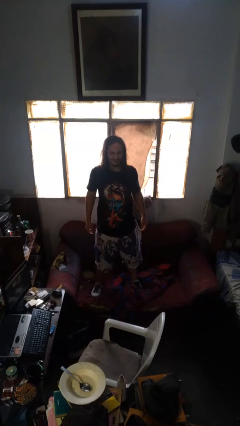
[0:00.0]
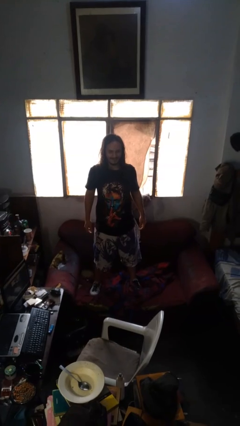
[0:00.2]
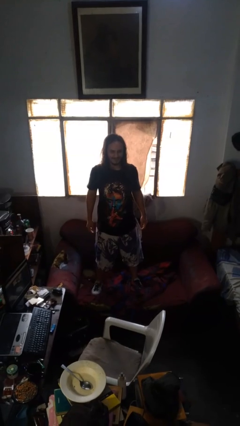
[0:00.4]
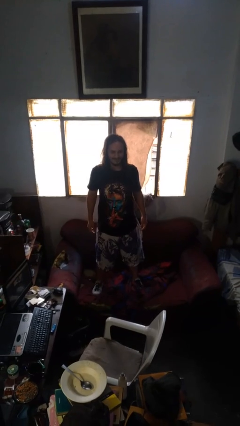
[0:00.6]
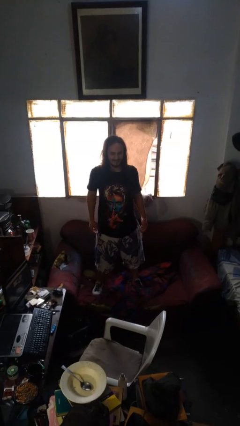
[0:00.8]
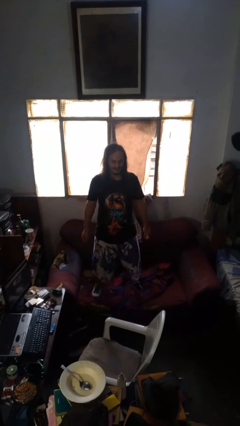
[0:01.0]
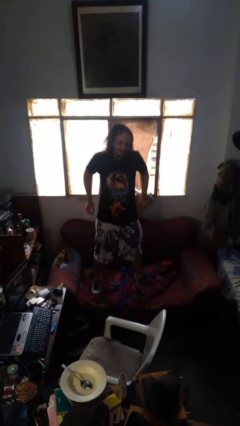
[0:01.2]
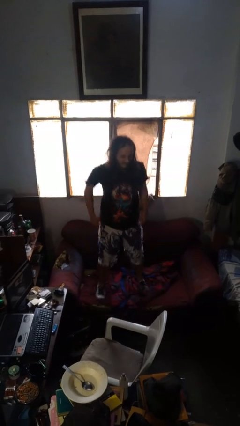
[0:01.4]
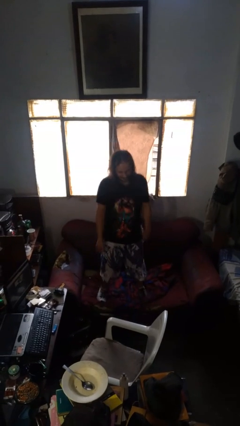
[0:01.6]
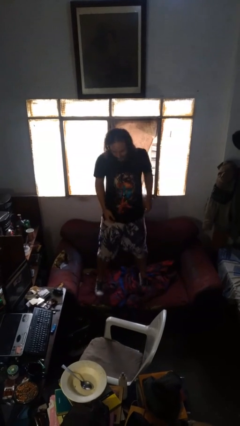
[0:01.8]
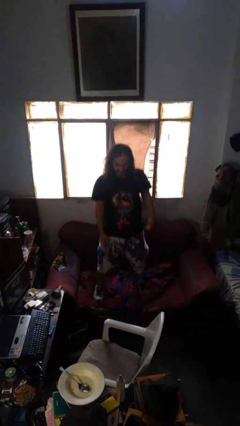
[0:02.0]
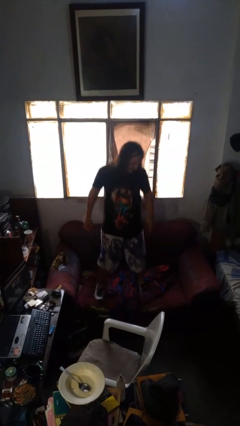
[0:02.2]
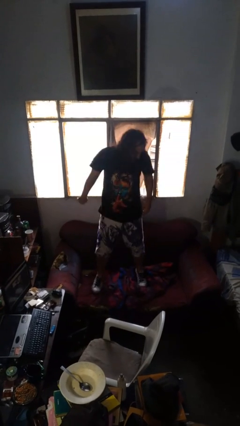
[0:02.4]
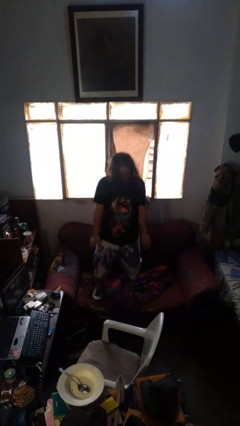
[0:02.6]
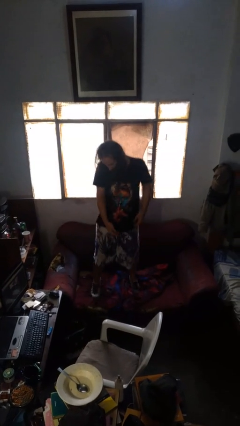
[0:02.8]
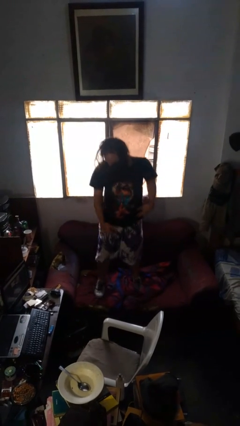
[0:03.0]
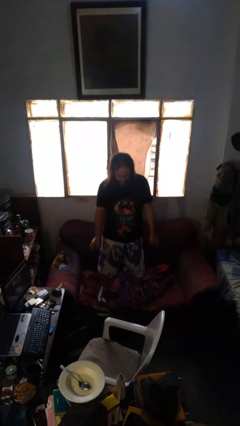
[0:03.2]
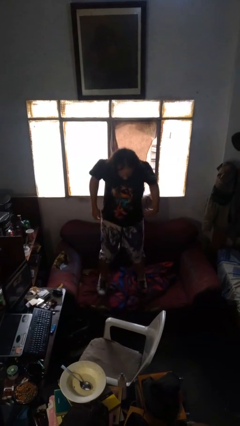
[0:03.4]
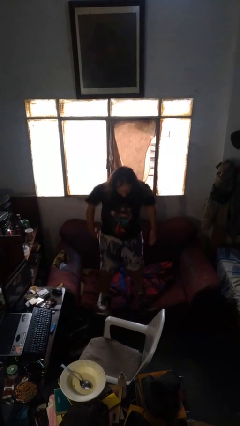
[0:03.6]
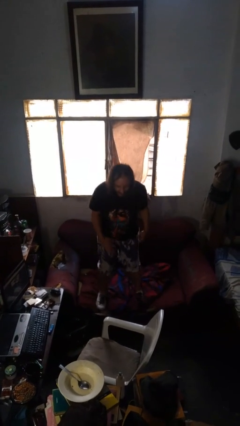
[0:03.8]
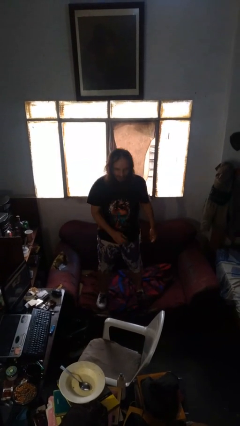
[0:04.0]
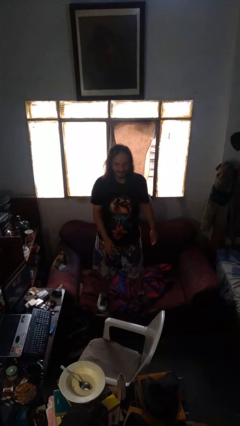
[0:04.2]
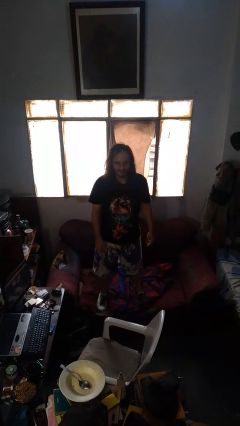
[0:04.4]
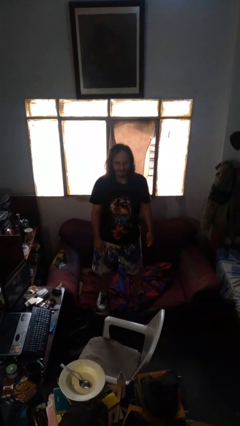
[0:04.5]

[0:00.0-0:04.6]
person jumps on couch

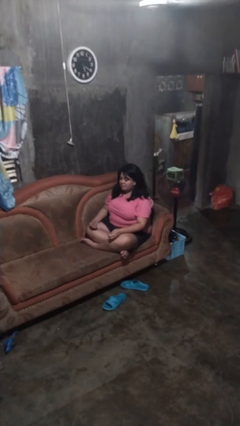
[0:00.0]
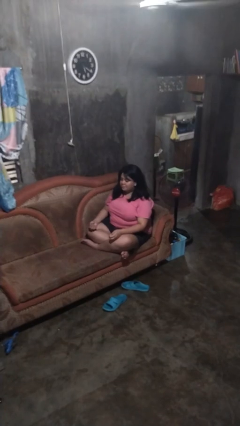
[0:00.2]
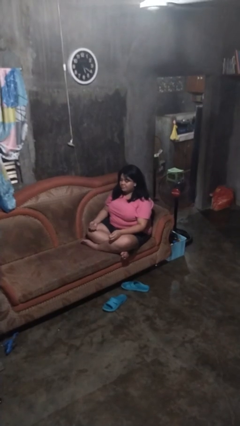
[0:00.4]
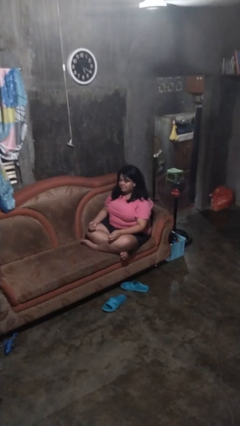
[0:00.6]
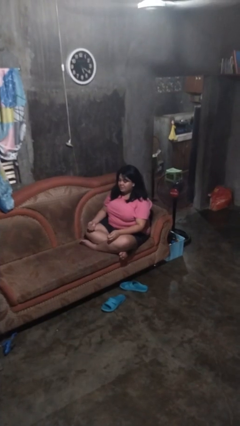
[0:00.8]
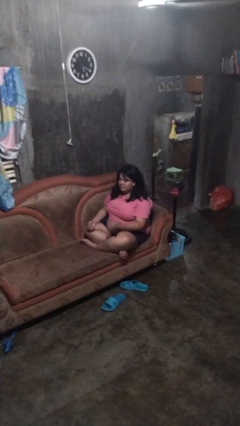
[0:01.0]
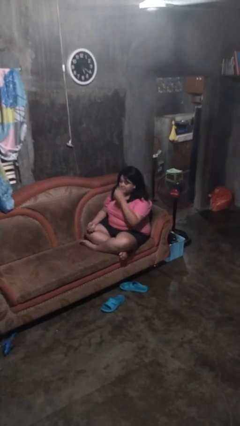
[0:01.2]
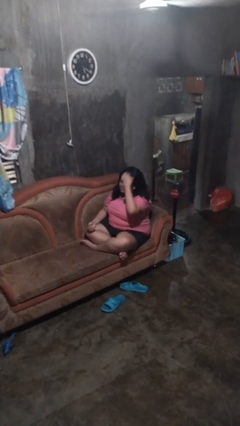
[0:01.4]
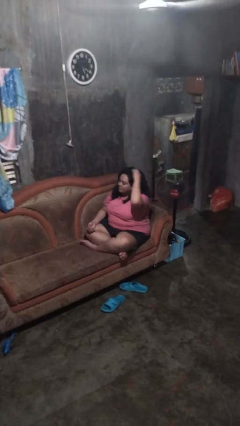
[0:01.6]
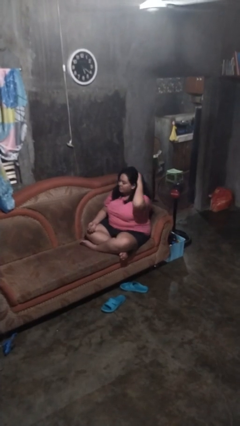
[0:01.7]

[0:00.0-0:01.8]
person strokes hair

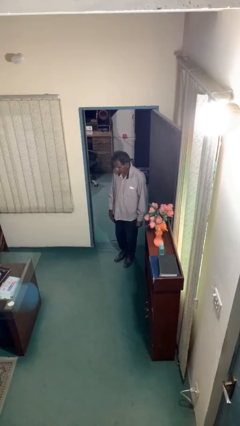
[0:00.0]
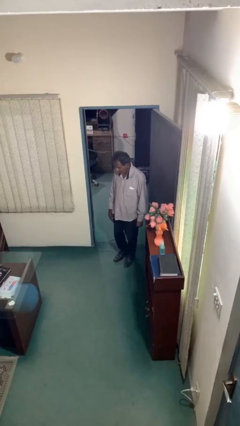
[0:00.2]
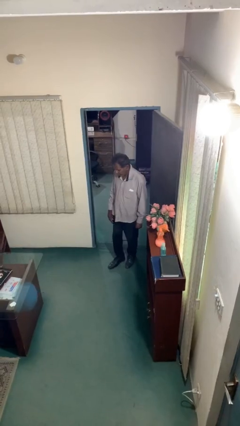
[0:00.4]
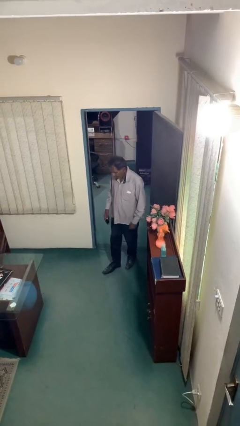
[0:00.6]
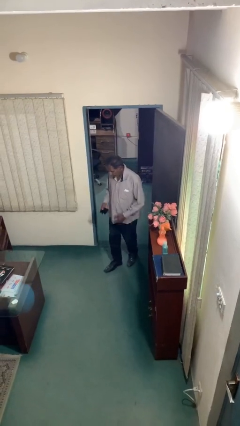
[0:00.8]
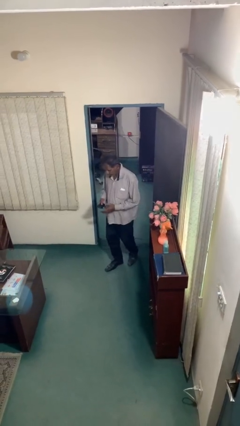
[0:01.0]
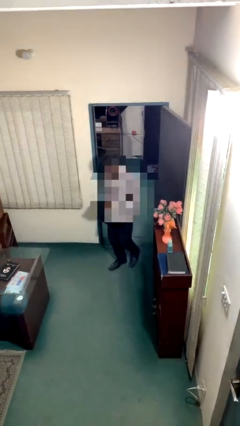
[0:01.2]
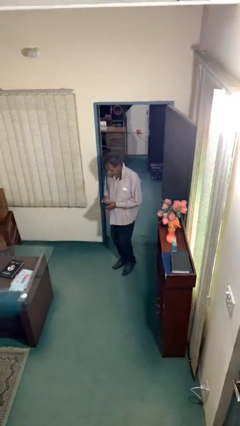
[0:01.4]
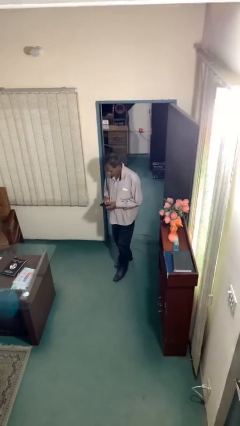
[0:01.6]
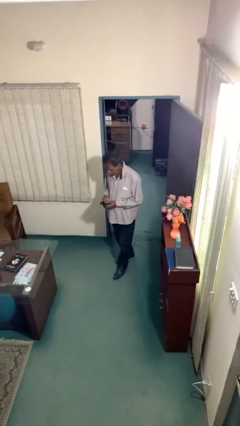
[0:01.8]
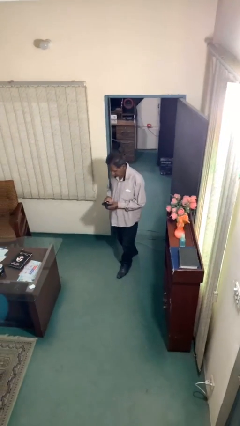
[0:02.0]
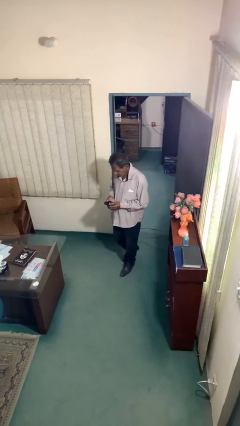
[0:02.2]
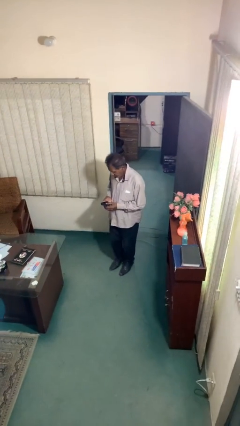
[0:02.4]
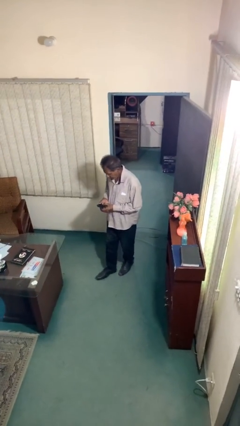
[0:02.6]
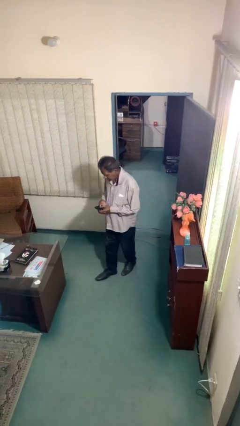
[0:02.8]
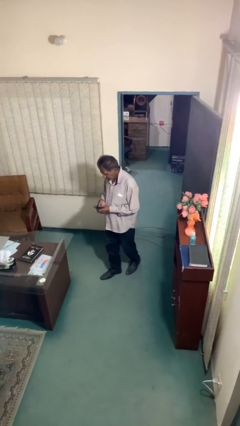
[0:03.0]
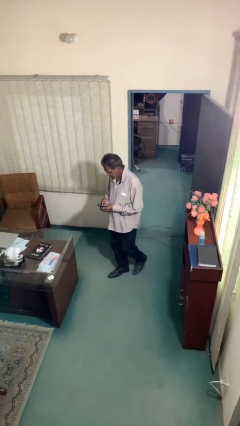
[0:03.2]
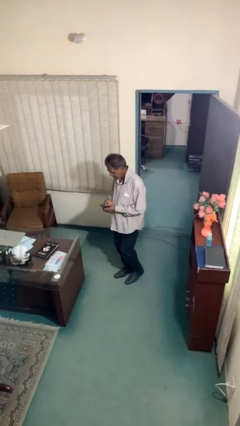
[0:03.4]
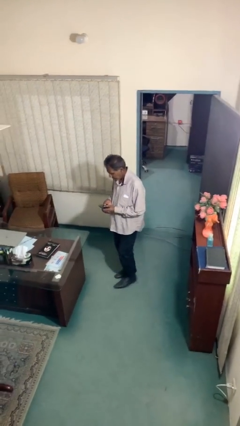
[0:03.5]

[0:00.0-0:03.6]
person texts on phone

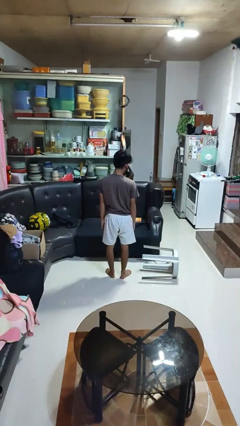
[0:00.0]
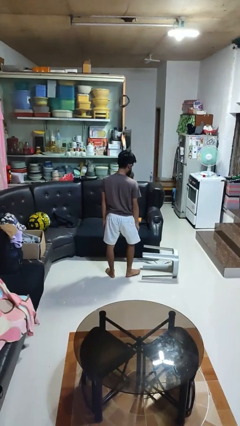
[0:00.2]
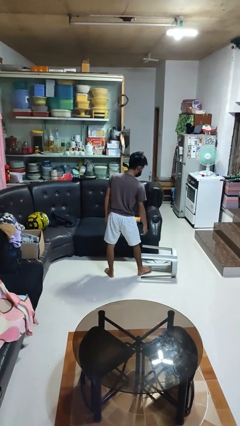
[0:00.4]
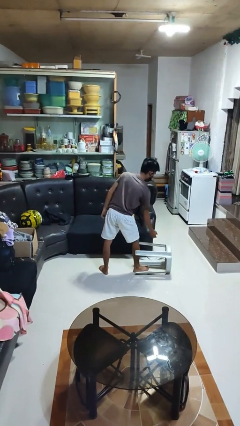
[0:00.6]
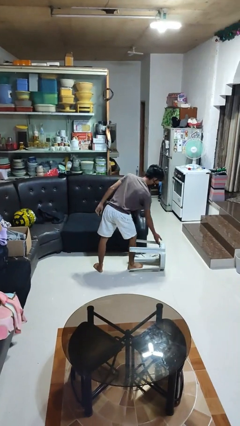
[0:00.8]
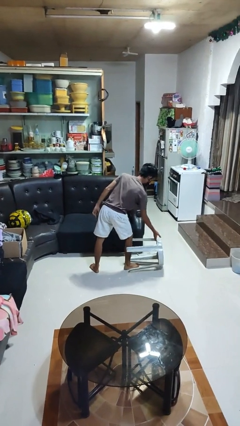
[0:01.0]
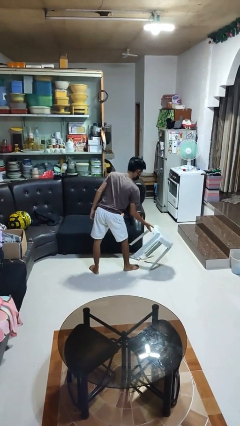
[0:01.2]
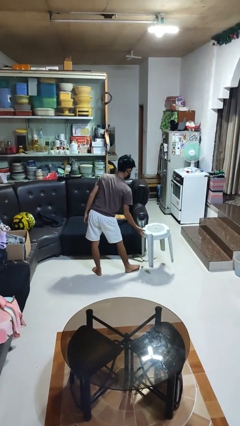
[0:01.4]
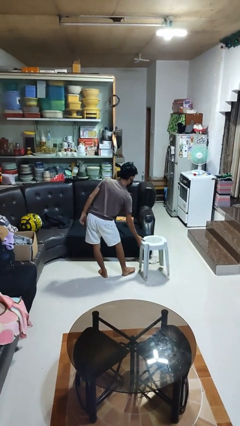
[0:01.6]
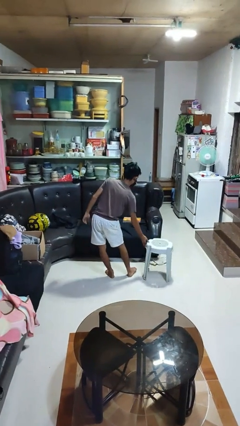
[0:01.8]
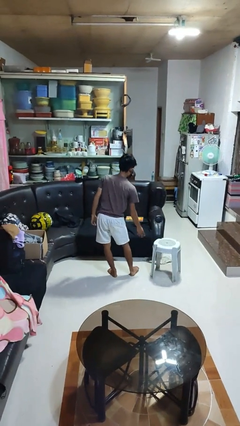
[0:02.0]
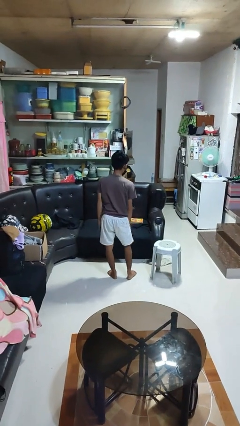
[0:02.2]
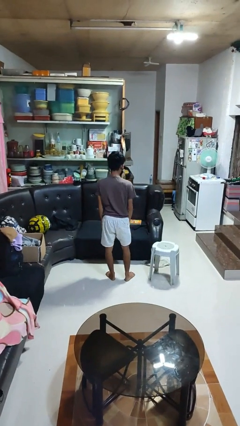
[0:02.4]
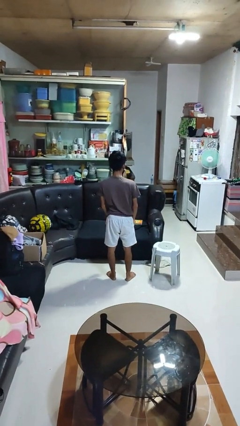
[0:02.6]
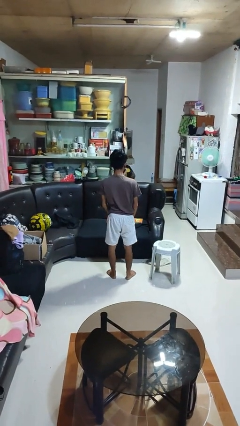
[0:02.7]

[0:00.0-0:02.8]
person sets upright furniture

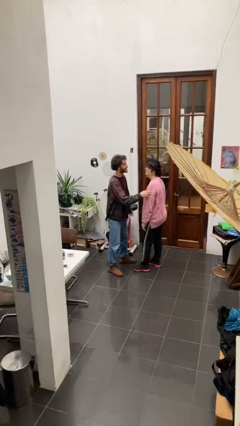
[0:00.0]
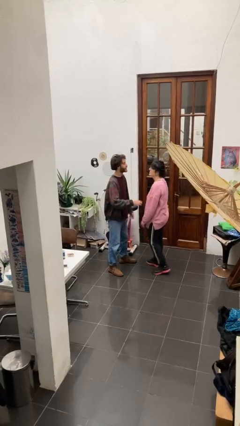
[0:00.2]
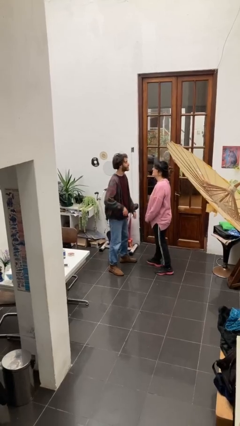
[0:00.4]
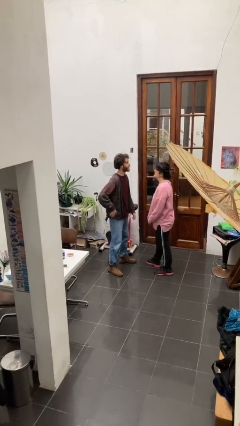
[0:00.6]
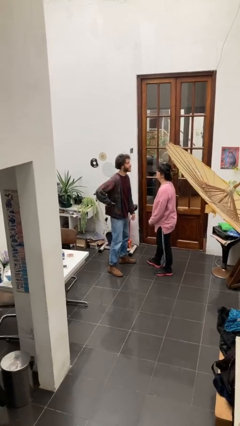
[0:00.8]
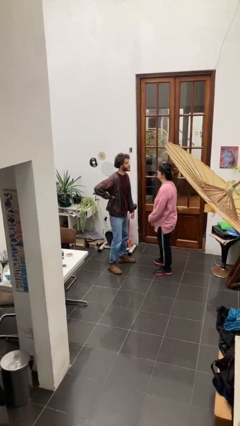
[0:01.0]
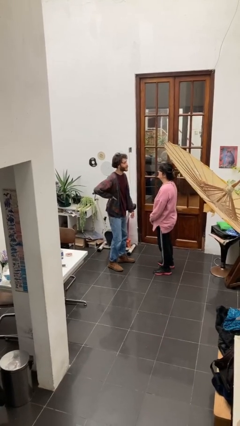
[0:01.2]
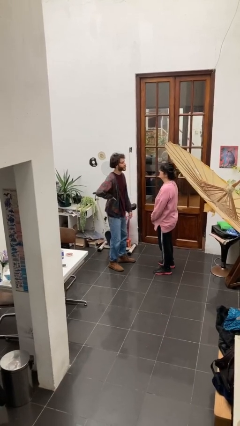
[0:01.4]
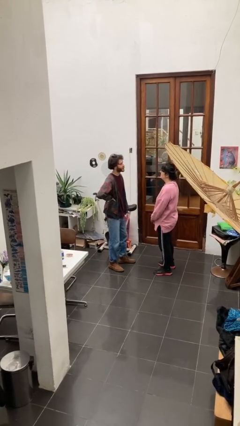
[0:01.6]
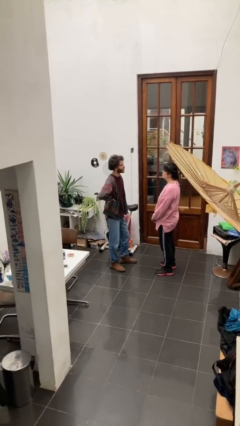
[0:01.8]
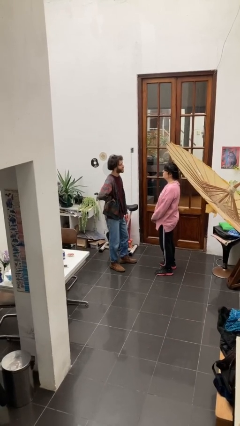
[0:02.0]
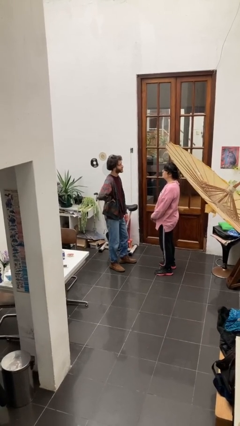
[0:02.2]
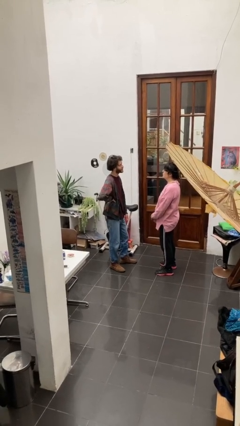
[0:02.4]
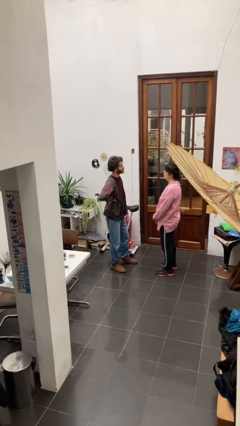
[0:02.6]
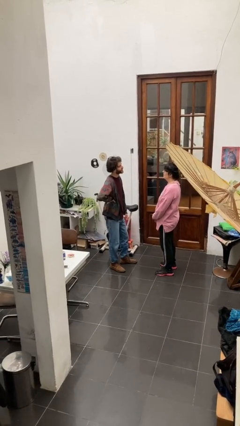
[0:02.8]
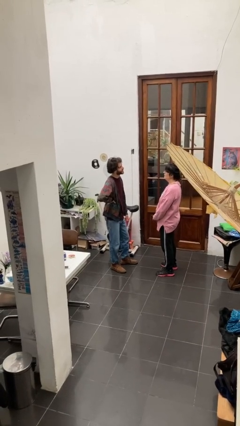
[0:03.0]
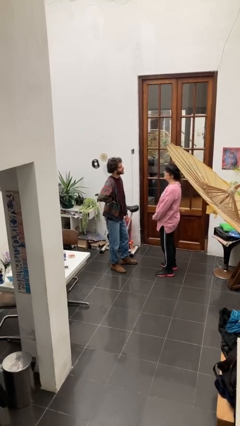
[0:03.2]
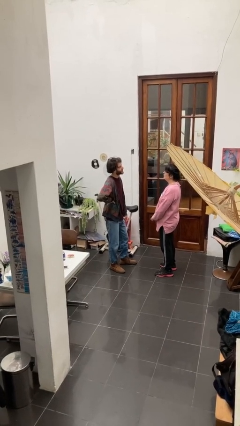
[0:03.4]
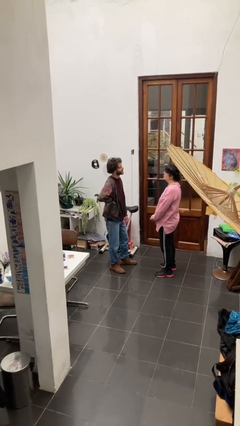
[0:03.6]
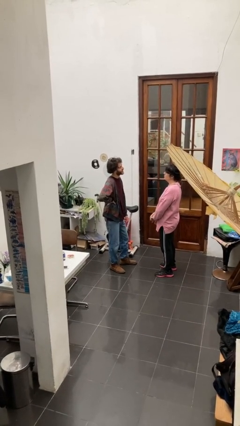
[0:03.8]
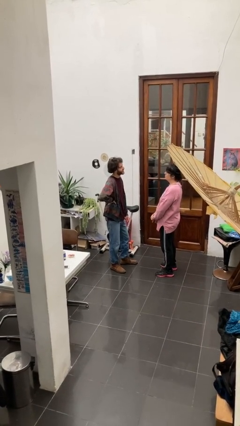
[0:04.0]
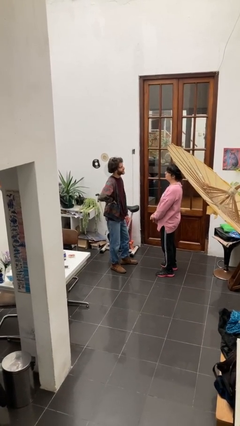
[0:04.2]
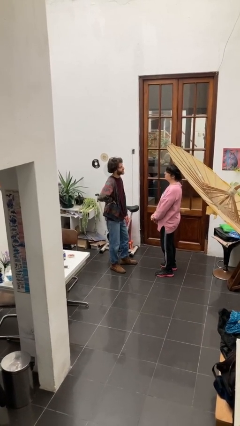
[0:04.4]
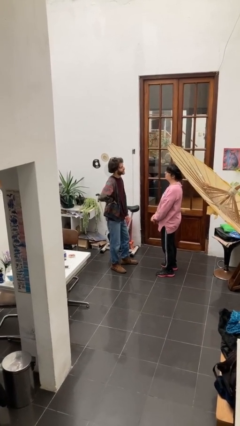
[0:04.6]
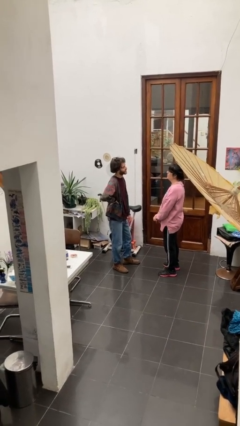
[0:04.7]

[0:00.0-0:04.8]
person talks to person
